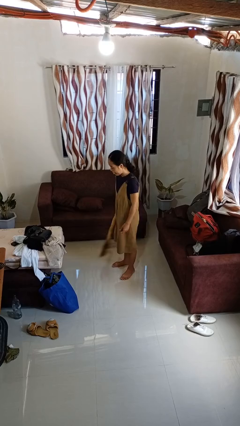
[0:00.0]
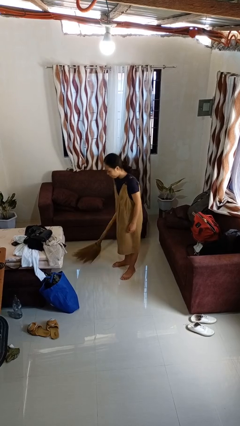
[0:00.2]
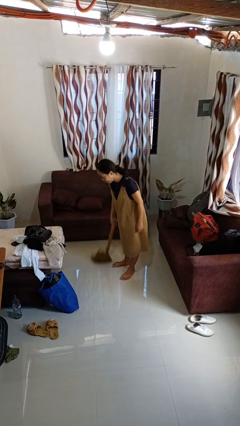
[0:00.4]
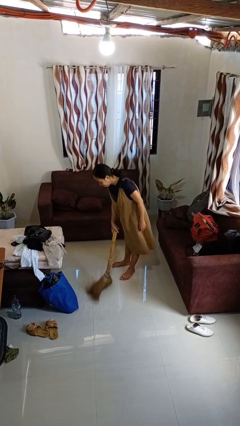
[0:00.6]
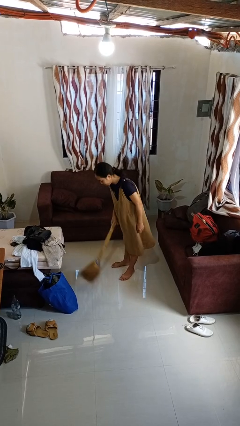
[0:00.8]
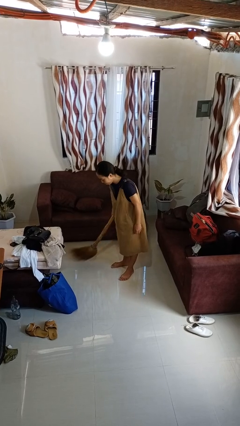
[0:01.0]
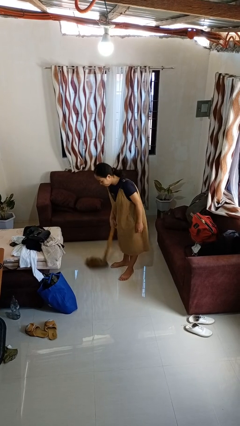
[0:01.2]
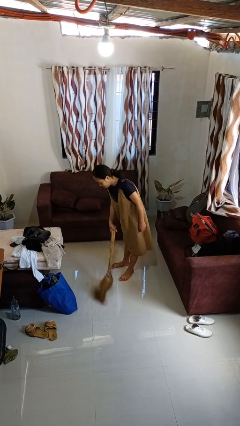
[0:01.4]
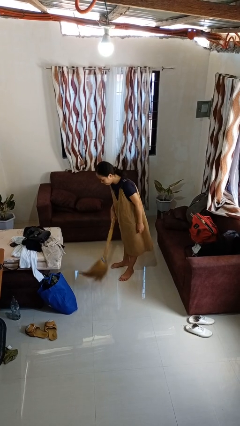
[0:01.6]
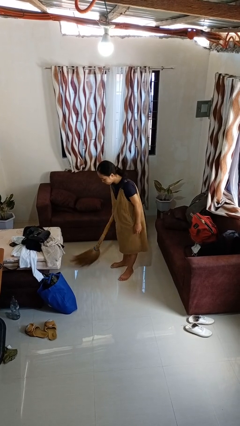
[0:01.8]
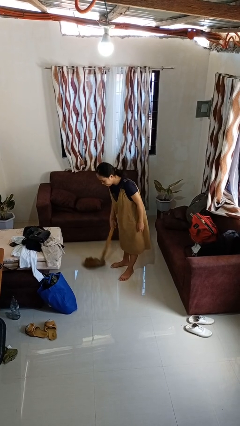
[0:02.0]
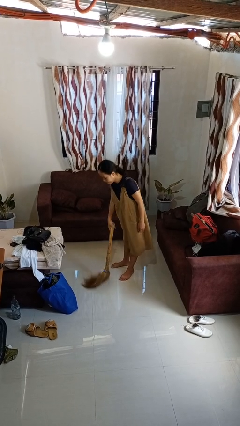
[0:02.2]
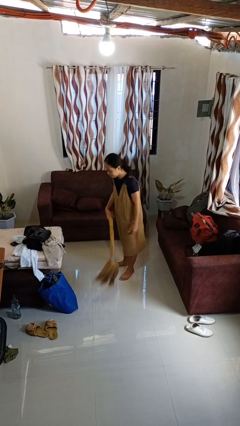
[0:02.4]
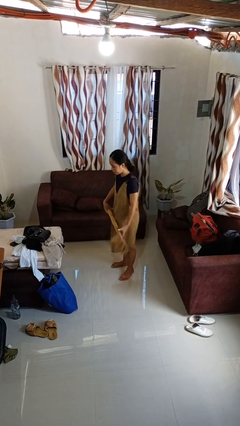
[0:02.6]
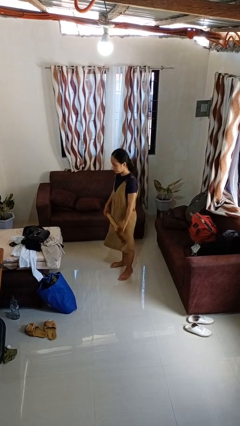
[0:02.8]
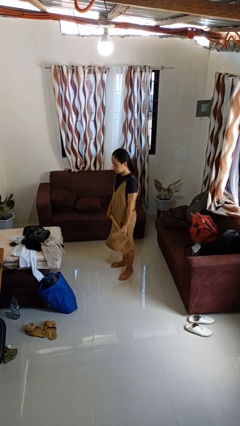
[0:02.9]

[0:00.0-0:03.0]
person sweeps floor

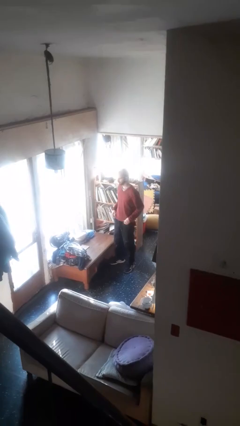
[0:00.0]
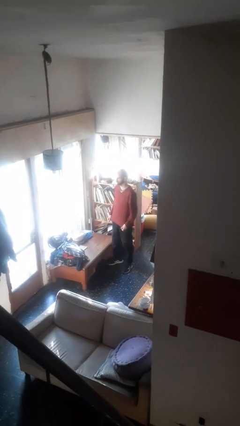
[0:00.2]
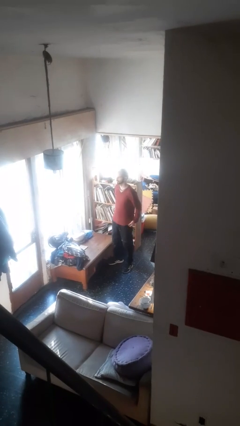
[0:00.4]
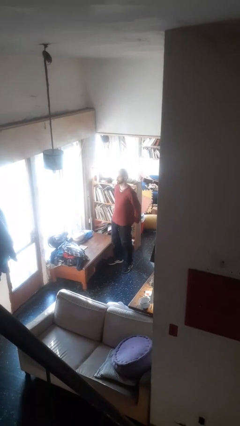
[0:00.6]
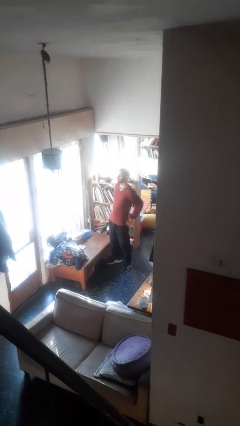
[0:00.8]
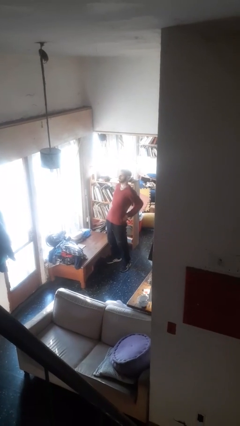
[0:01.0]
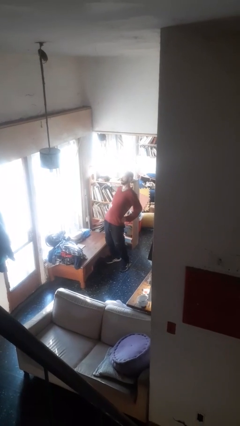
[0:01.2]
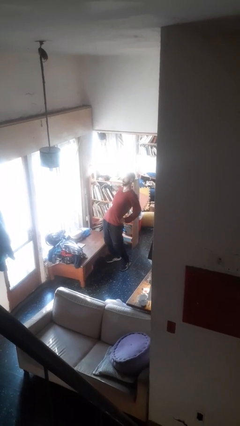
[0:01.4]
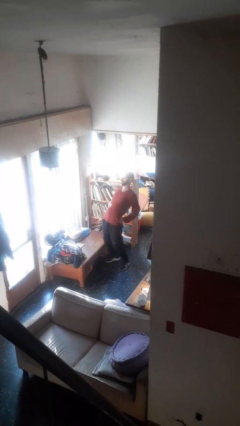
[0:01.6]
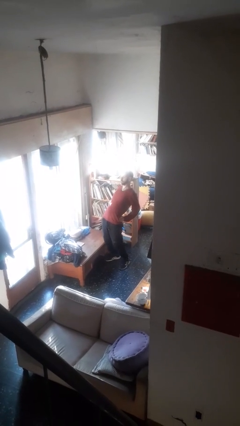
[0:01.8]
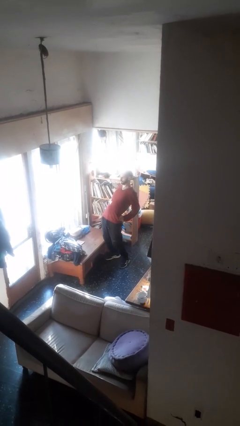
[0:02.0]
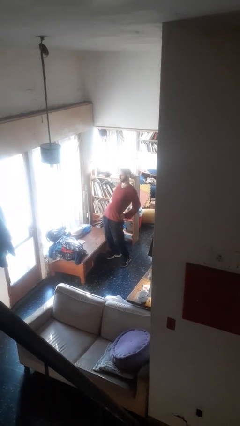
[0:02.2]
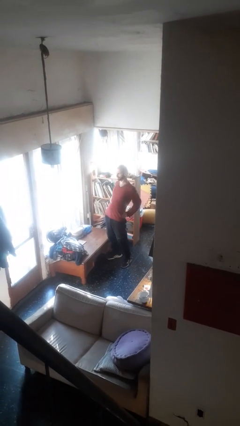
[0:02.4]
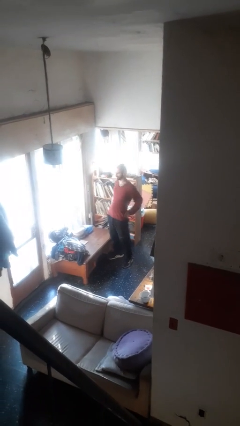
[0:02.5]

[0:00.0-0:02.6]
person stretches back

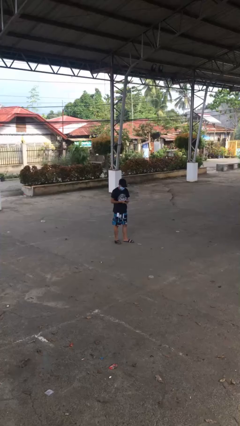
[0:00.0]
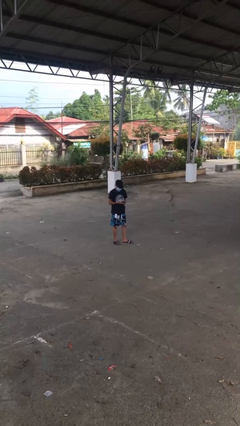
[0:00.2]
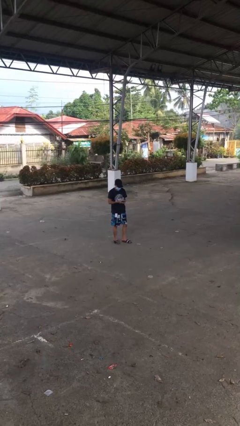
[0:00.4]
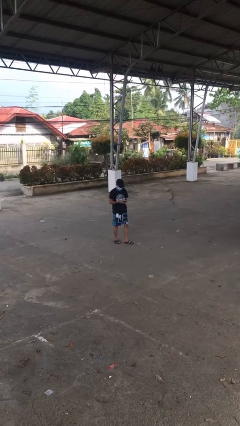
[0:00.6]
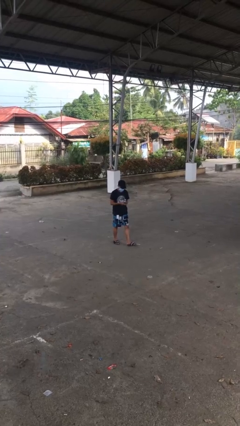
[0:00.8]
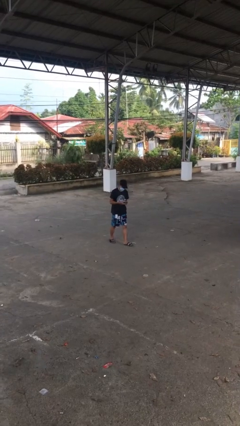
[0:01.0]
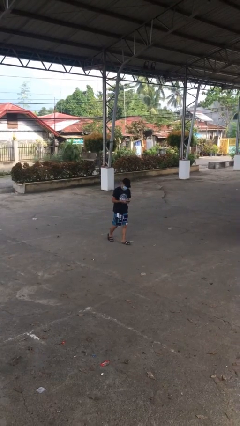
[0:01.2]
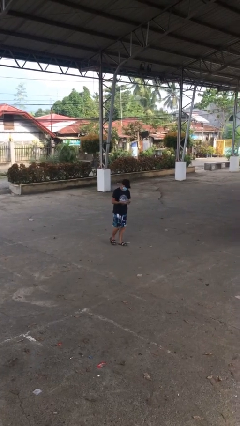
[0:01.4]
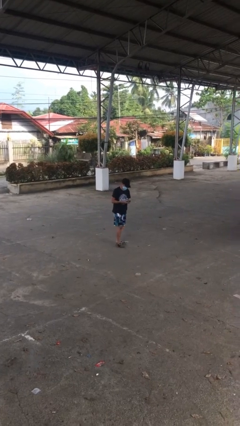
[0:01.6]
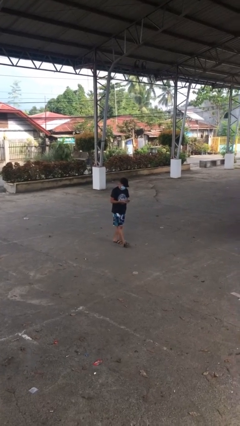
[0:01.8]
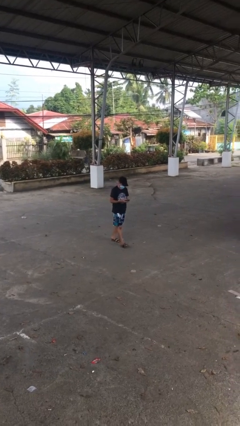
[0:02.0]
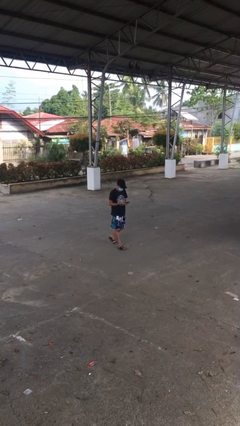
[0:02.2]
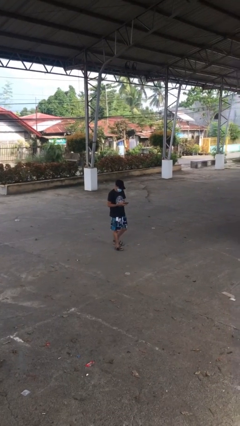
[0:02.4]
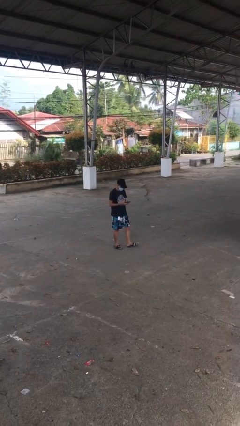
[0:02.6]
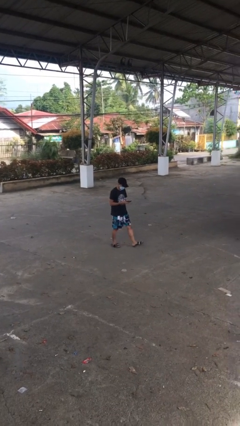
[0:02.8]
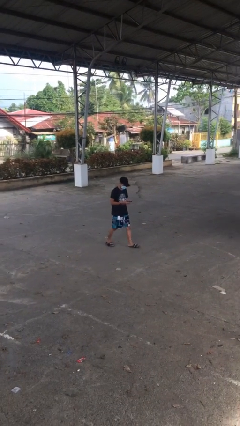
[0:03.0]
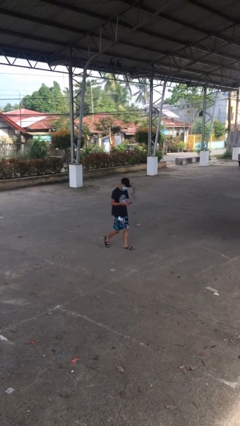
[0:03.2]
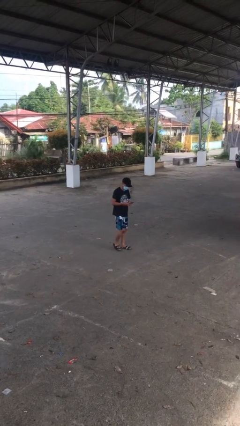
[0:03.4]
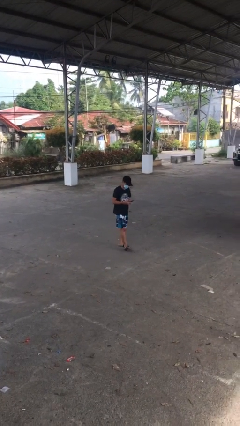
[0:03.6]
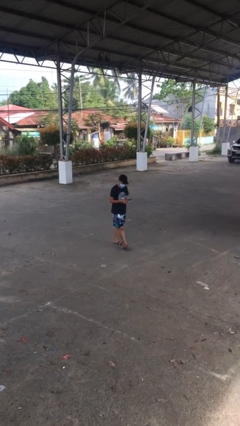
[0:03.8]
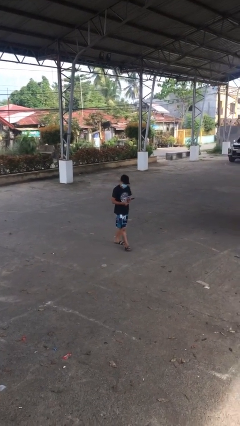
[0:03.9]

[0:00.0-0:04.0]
person texts on phone

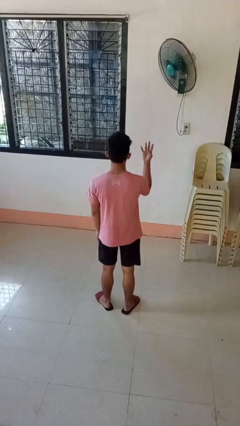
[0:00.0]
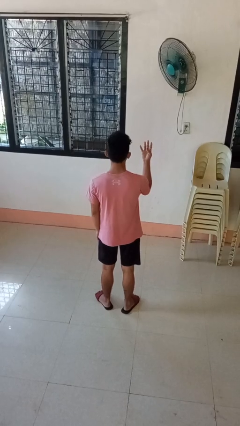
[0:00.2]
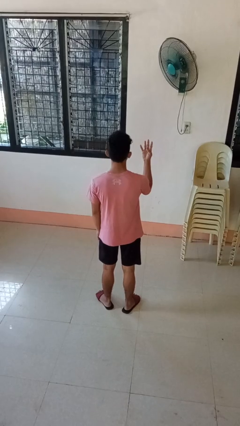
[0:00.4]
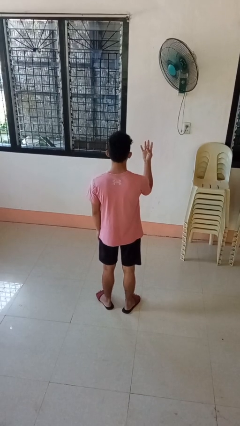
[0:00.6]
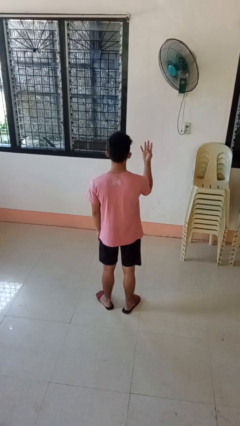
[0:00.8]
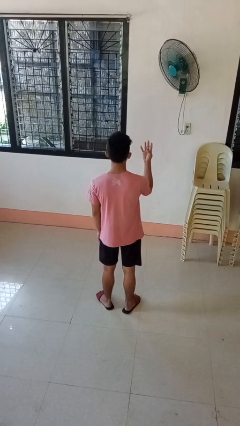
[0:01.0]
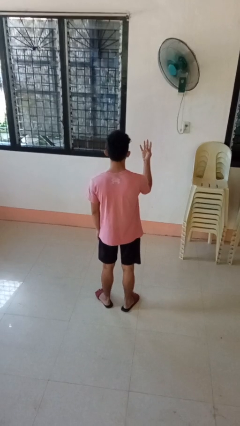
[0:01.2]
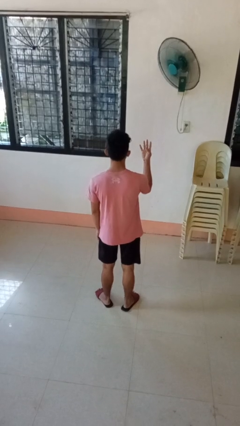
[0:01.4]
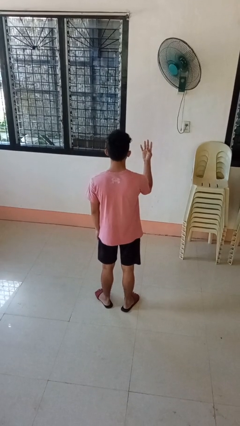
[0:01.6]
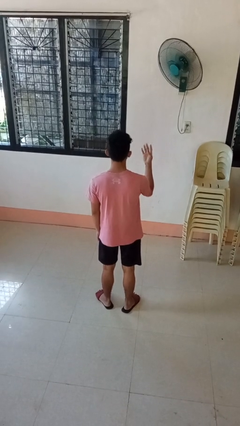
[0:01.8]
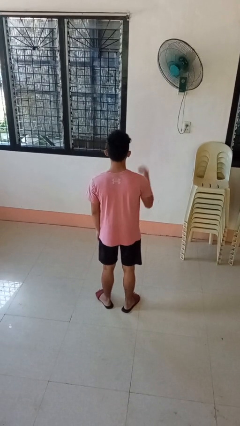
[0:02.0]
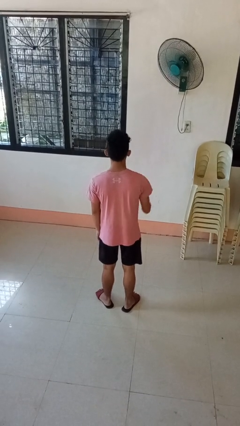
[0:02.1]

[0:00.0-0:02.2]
person gestures number four

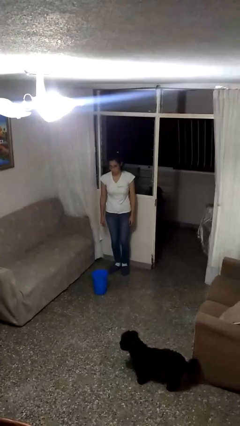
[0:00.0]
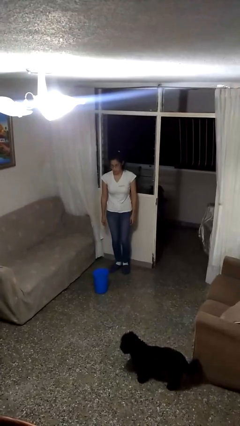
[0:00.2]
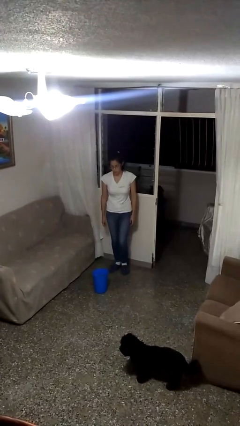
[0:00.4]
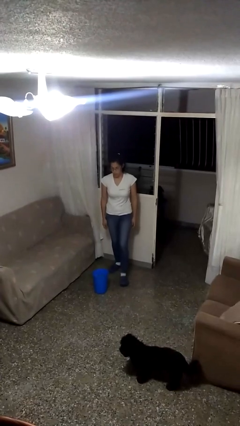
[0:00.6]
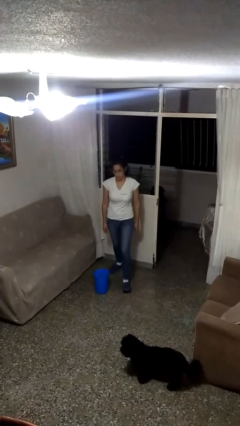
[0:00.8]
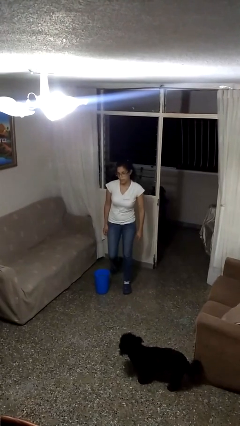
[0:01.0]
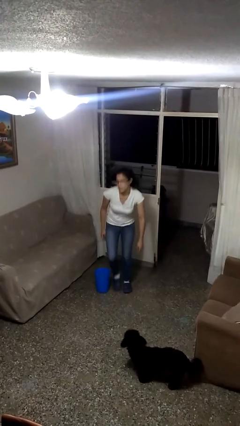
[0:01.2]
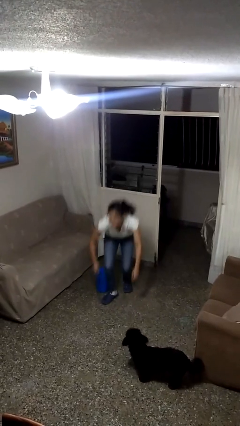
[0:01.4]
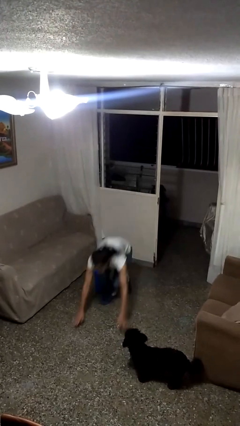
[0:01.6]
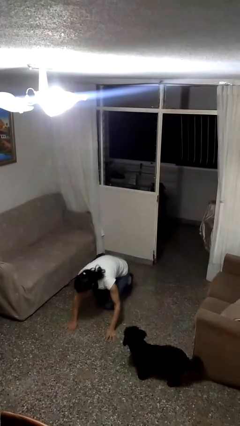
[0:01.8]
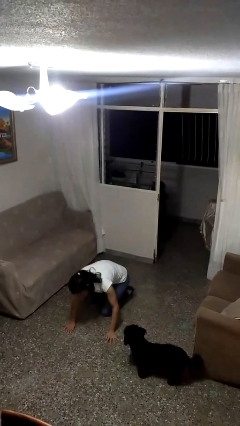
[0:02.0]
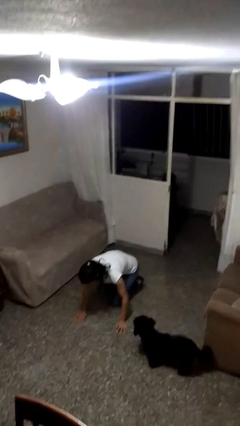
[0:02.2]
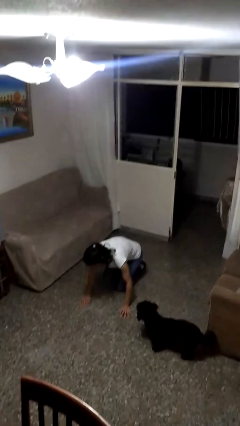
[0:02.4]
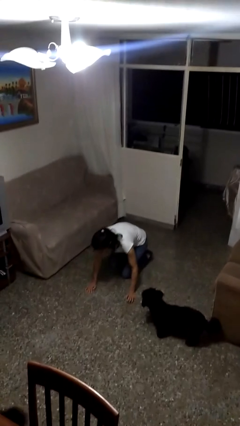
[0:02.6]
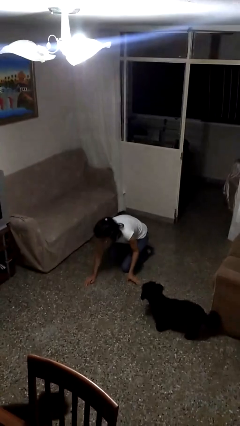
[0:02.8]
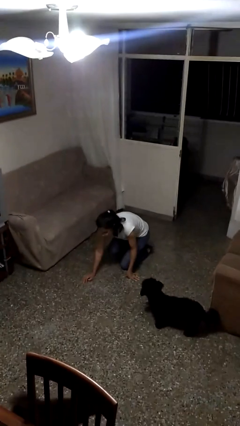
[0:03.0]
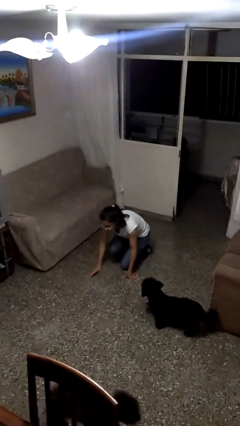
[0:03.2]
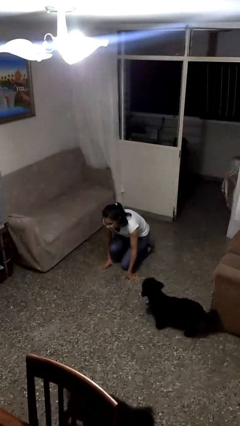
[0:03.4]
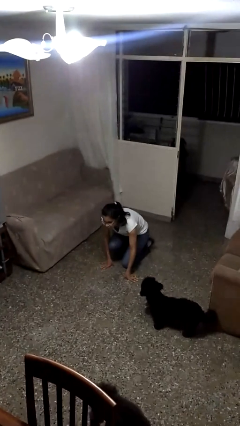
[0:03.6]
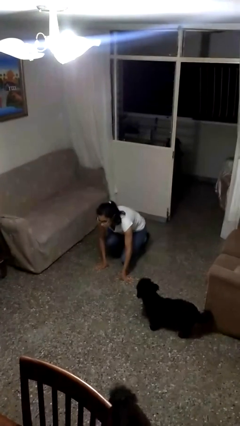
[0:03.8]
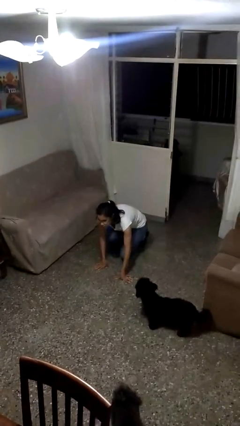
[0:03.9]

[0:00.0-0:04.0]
person trips on object on floor

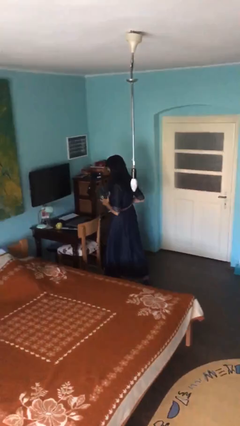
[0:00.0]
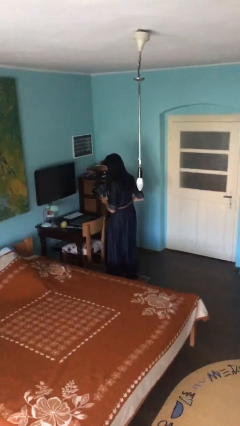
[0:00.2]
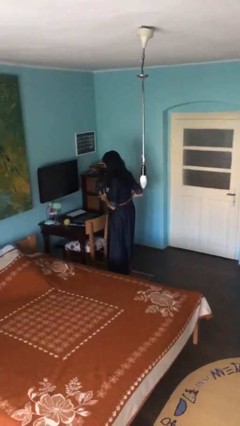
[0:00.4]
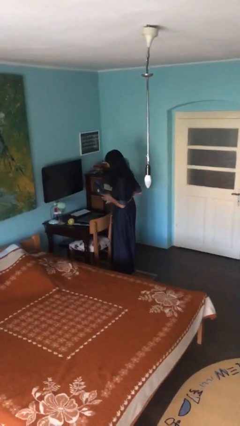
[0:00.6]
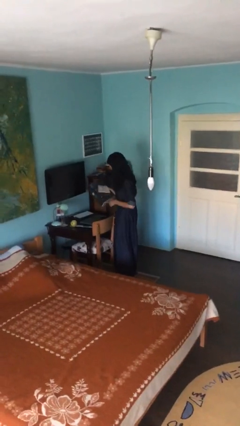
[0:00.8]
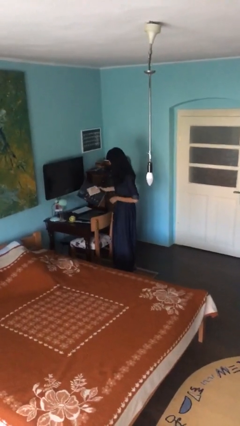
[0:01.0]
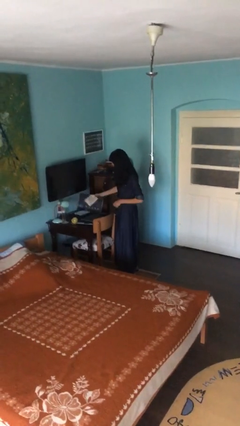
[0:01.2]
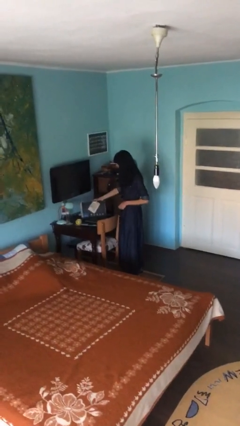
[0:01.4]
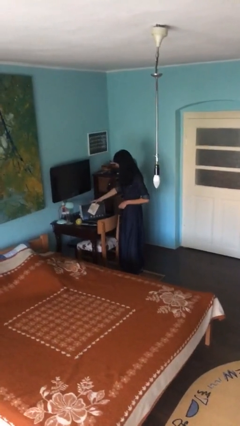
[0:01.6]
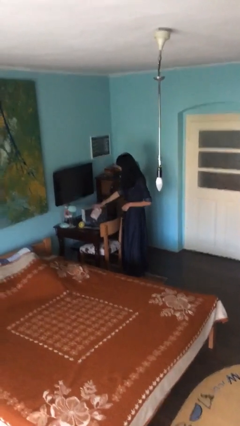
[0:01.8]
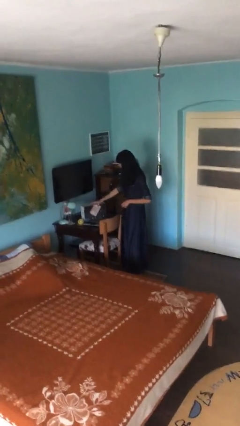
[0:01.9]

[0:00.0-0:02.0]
person puts down object on table
